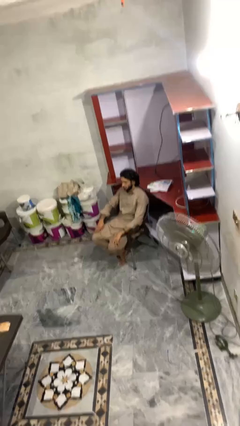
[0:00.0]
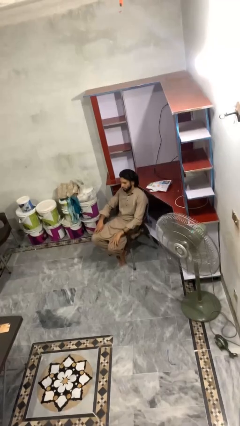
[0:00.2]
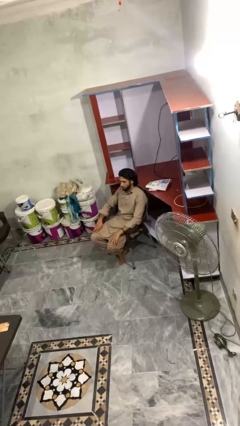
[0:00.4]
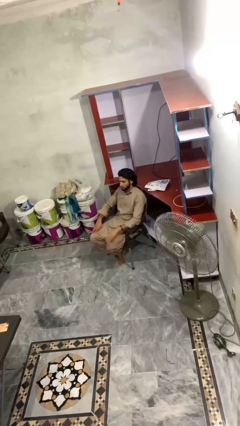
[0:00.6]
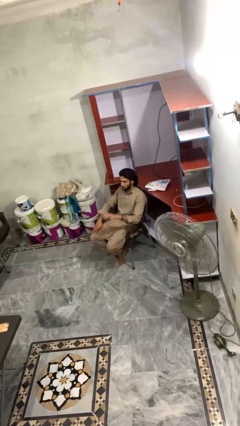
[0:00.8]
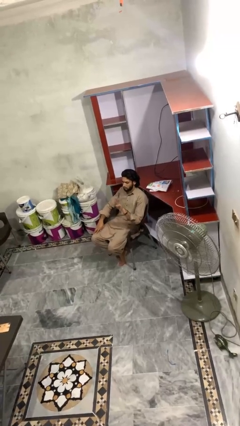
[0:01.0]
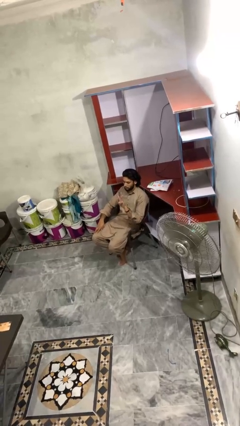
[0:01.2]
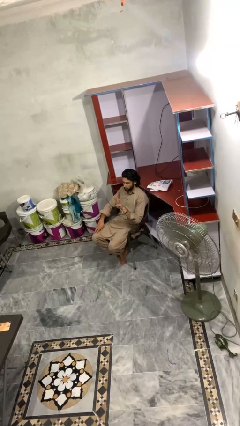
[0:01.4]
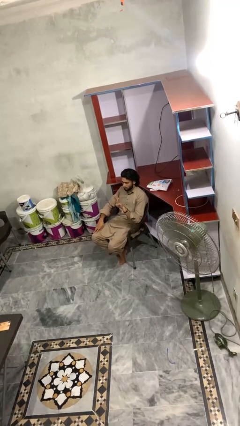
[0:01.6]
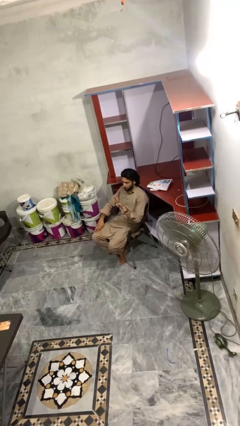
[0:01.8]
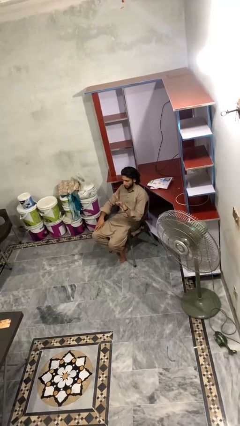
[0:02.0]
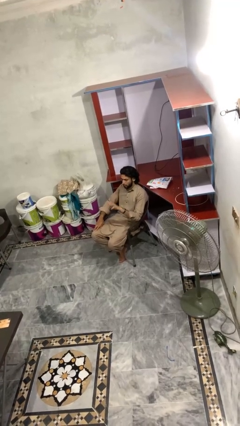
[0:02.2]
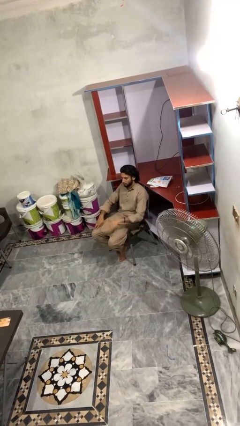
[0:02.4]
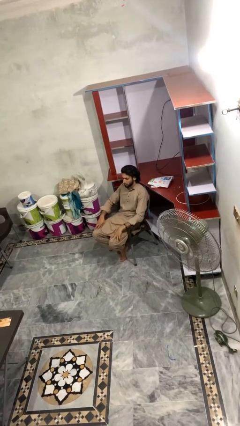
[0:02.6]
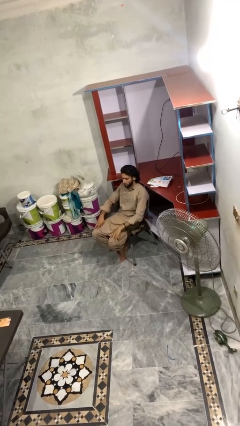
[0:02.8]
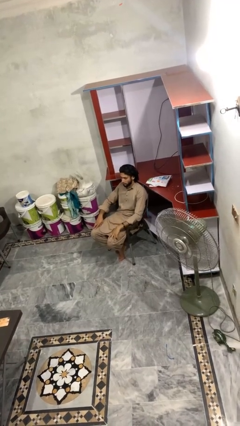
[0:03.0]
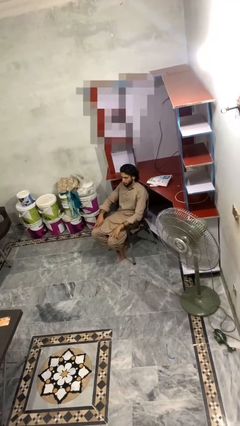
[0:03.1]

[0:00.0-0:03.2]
person gestures number three

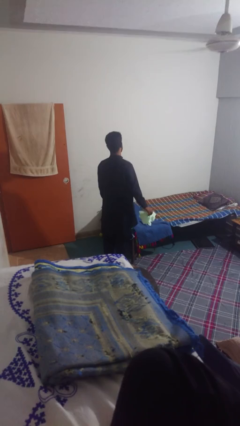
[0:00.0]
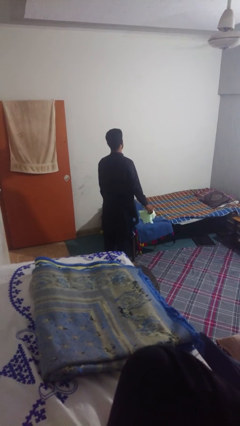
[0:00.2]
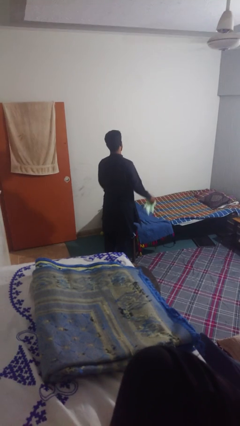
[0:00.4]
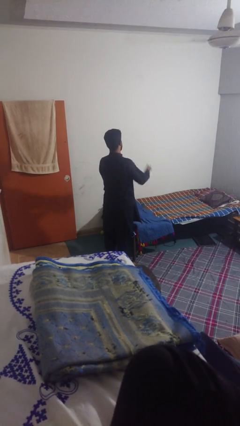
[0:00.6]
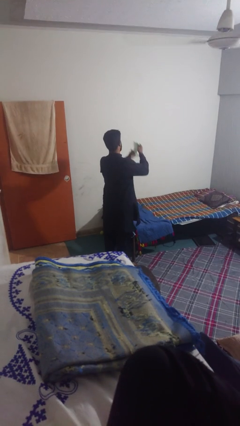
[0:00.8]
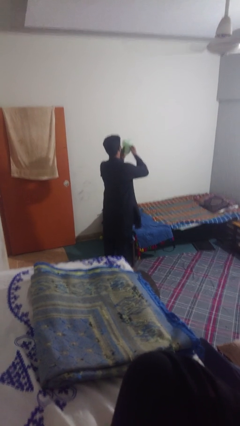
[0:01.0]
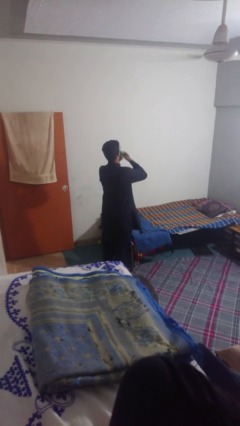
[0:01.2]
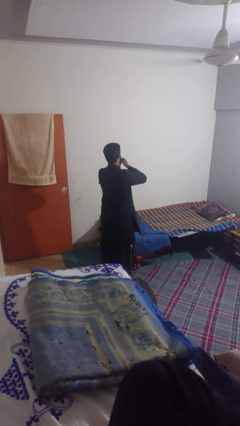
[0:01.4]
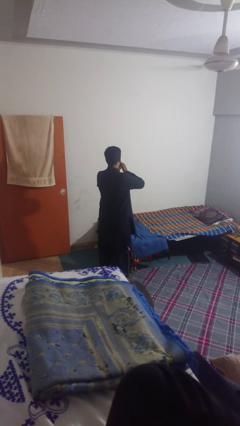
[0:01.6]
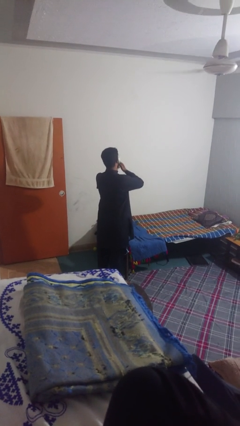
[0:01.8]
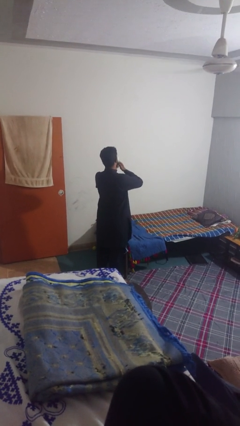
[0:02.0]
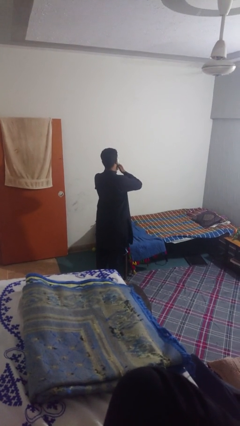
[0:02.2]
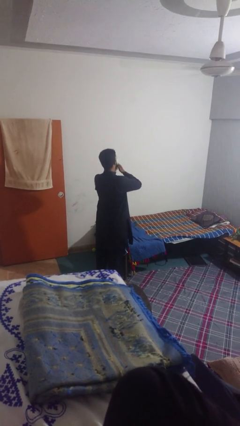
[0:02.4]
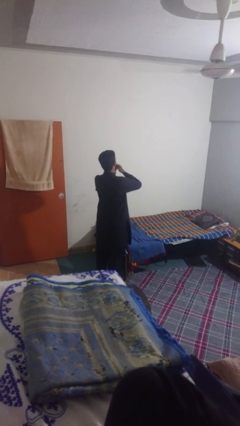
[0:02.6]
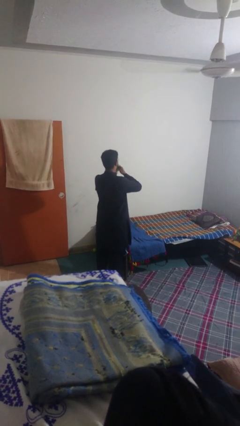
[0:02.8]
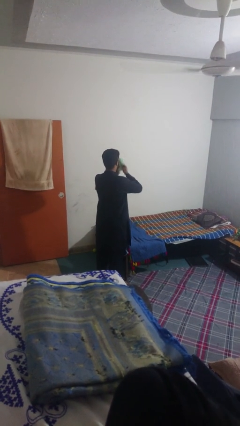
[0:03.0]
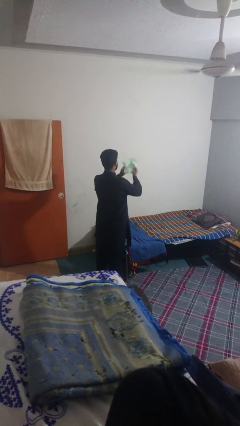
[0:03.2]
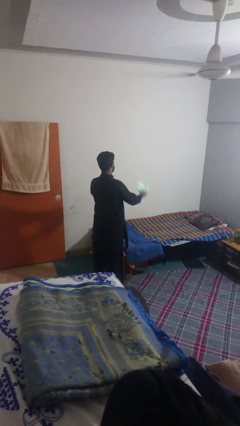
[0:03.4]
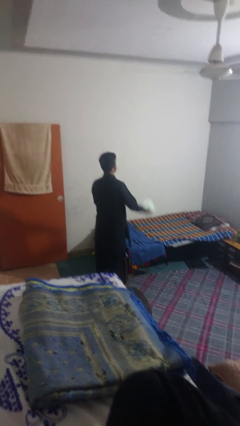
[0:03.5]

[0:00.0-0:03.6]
person blows nose

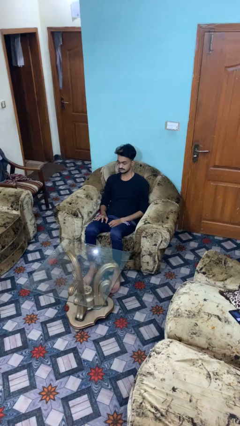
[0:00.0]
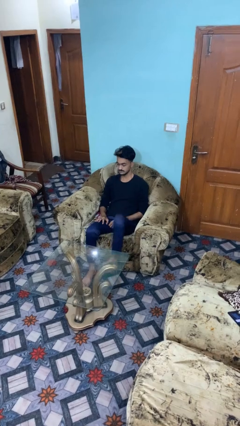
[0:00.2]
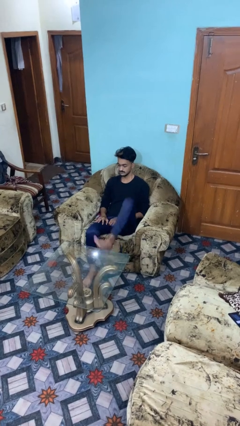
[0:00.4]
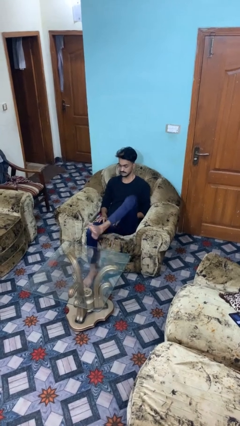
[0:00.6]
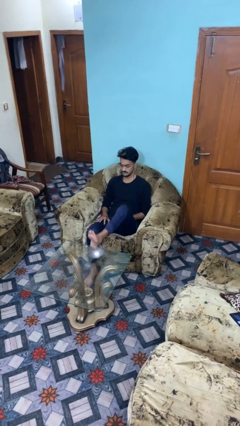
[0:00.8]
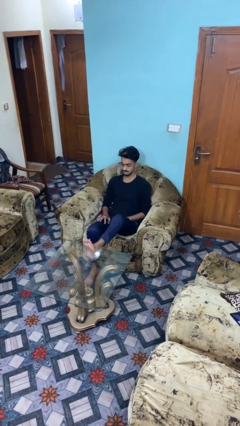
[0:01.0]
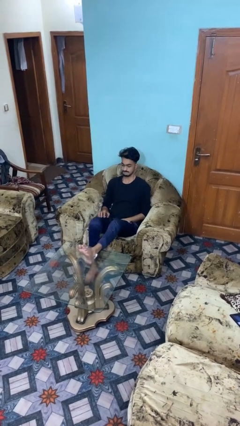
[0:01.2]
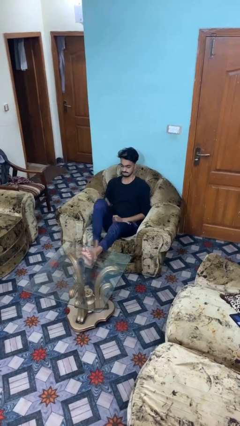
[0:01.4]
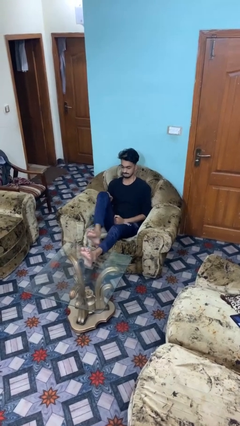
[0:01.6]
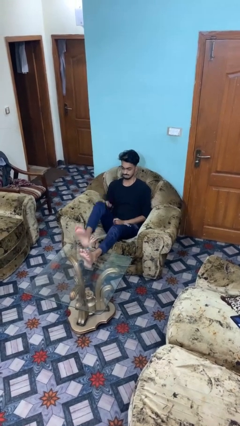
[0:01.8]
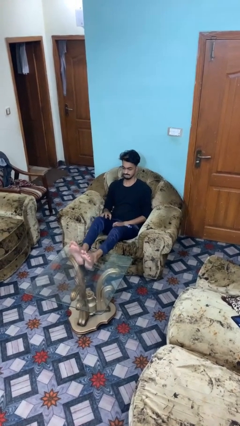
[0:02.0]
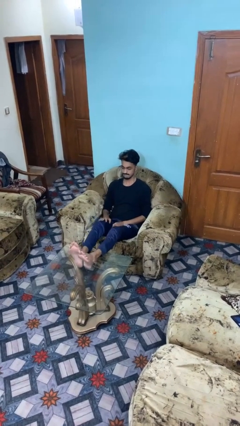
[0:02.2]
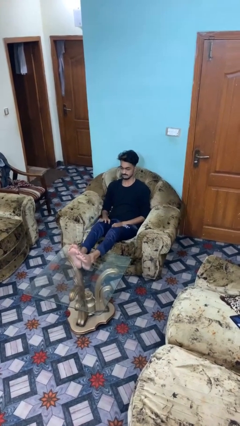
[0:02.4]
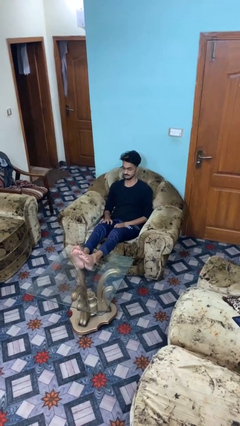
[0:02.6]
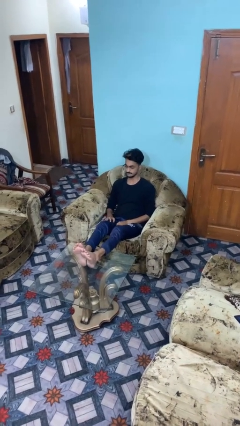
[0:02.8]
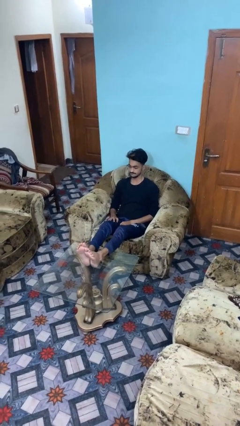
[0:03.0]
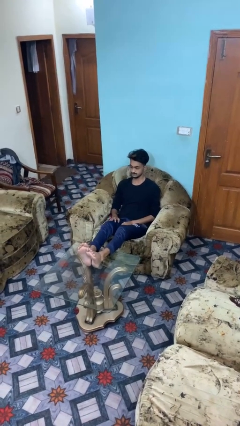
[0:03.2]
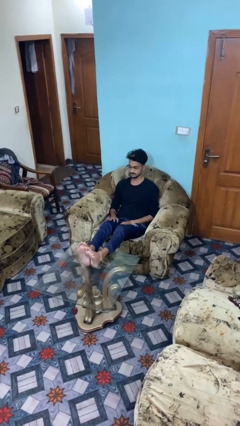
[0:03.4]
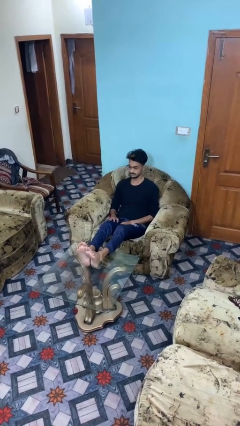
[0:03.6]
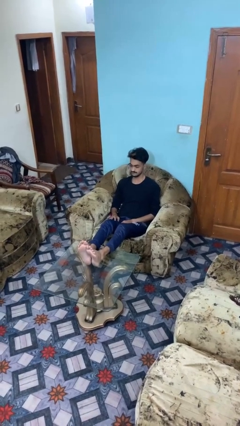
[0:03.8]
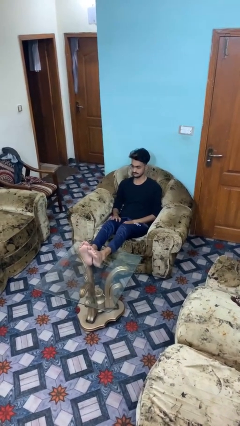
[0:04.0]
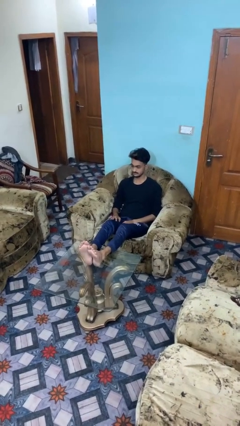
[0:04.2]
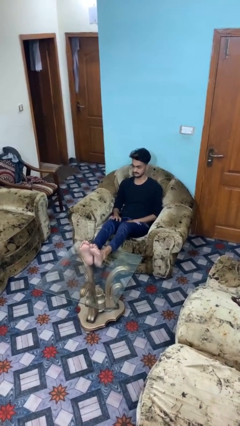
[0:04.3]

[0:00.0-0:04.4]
person puts feet up

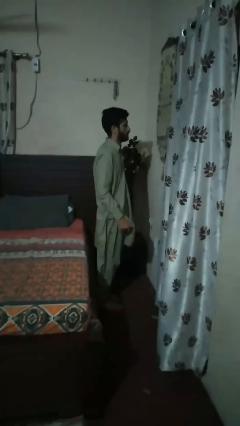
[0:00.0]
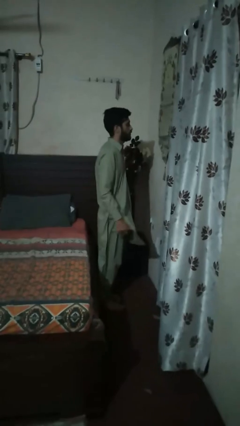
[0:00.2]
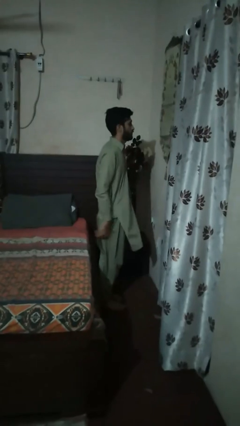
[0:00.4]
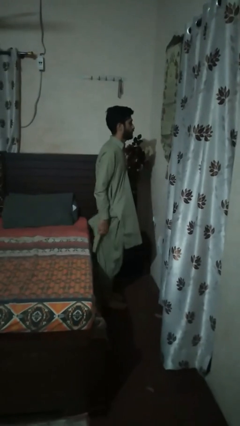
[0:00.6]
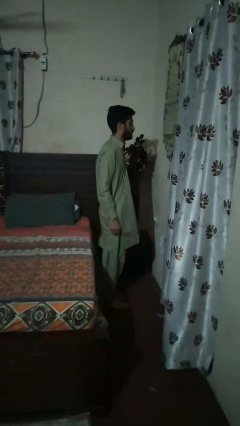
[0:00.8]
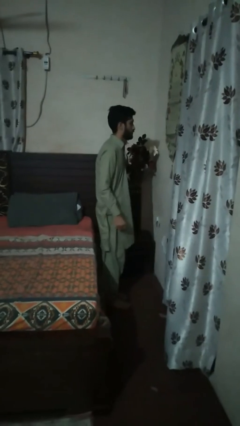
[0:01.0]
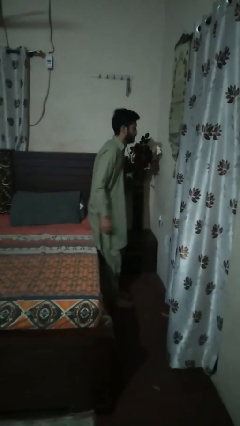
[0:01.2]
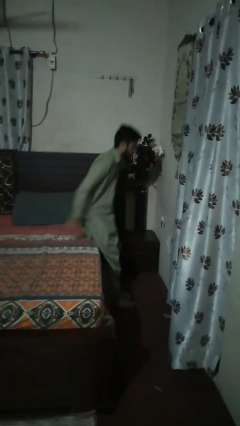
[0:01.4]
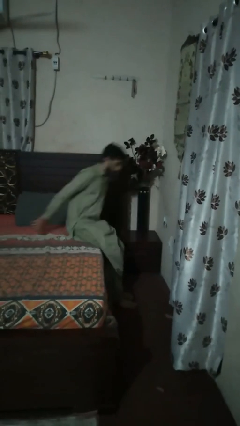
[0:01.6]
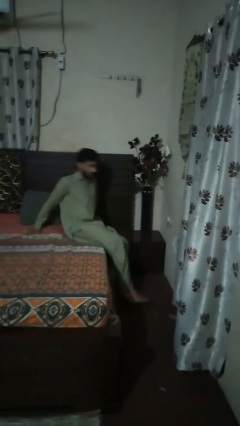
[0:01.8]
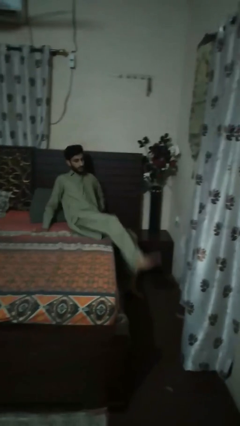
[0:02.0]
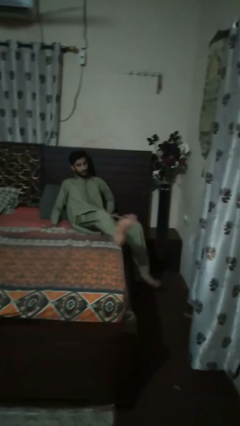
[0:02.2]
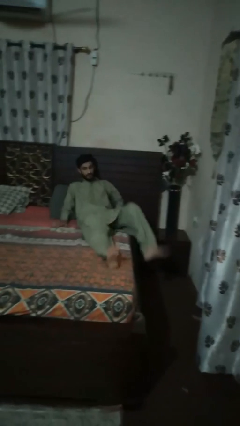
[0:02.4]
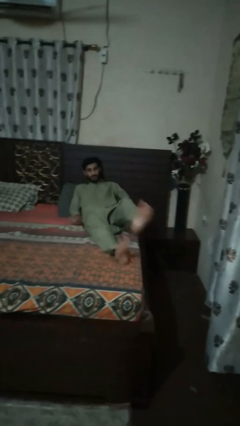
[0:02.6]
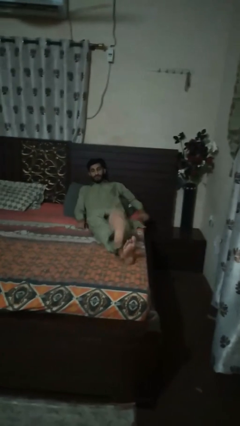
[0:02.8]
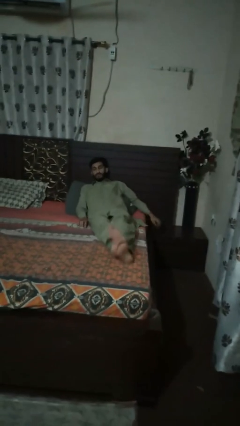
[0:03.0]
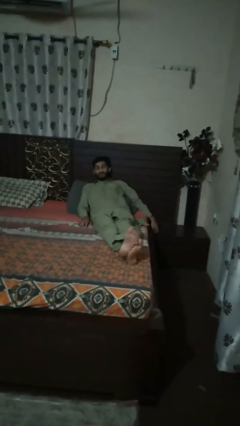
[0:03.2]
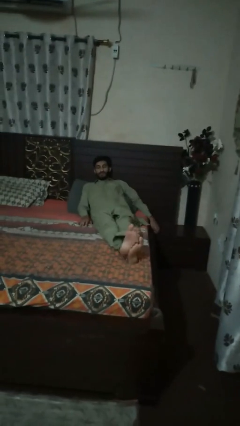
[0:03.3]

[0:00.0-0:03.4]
person lies down on bed

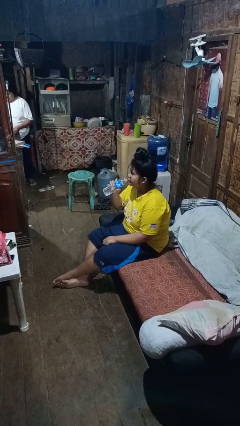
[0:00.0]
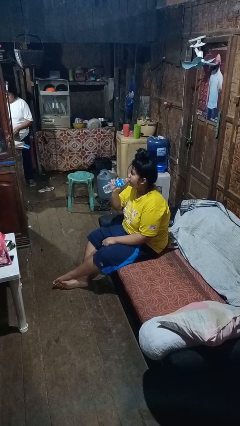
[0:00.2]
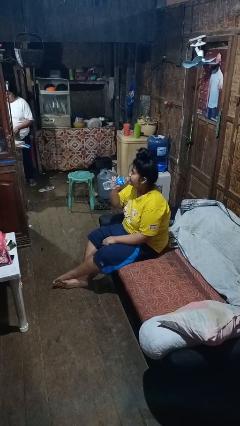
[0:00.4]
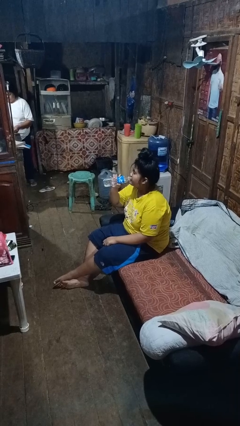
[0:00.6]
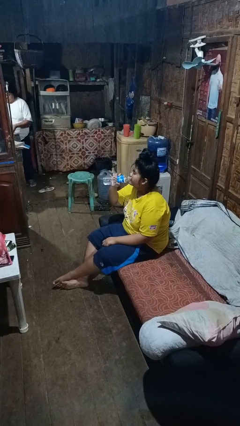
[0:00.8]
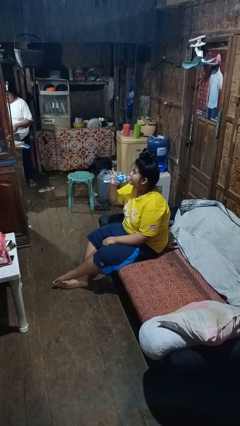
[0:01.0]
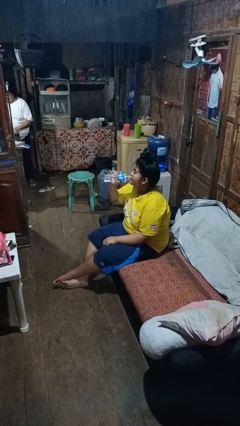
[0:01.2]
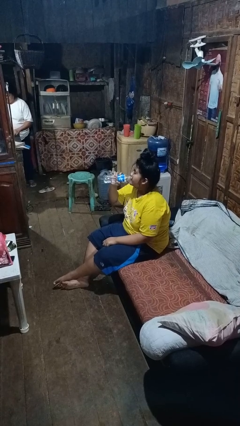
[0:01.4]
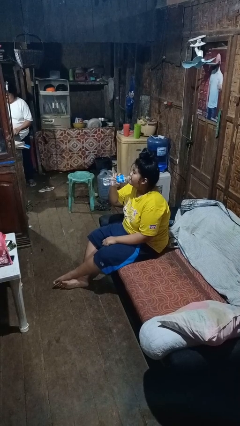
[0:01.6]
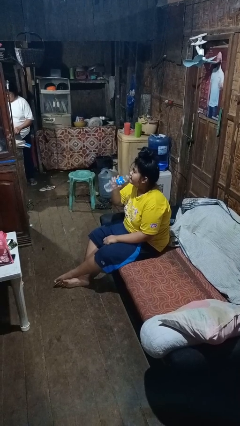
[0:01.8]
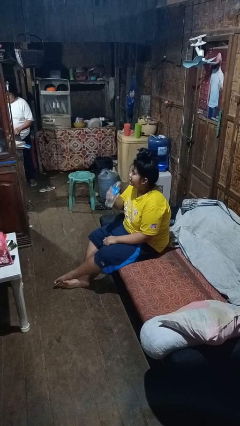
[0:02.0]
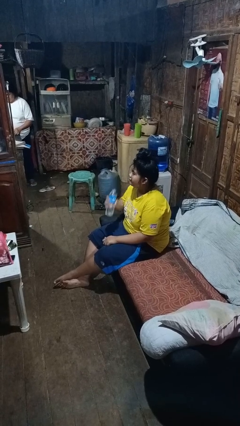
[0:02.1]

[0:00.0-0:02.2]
person drinks from bottle

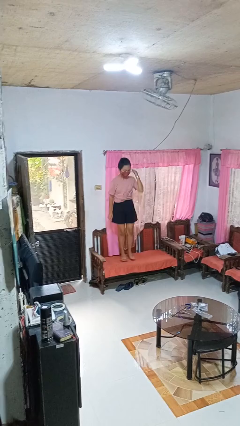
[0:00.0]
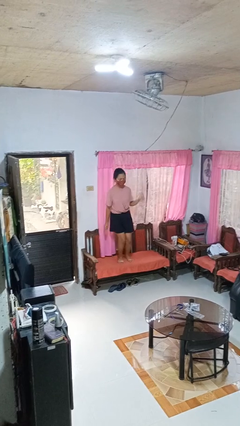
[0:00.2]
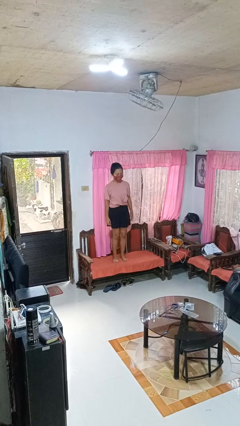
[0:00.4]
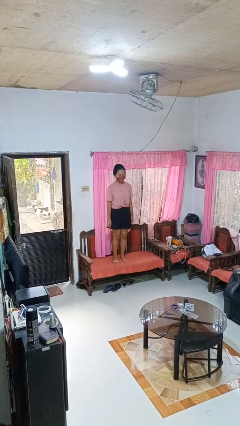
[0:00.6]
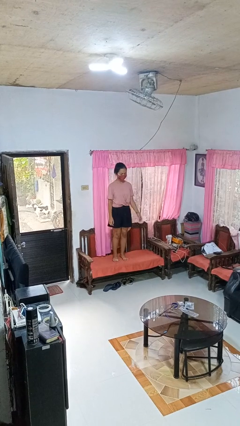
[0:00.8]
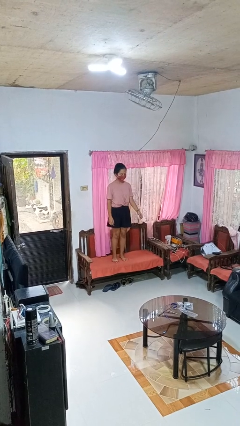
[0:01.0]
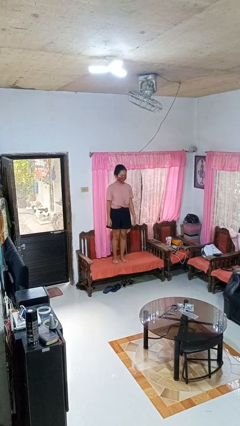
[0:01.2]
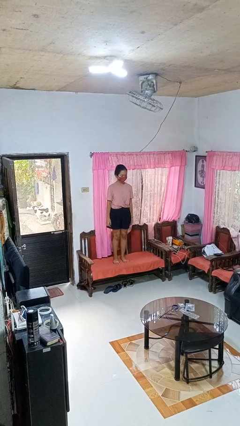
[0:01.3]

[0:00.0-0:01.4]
person jumps on couch
